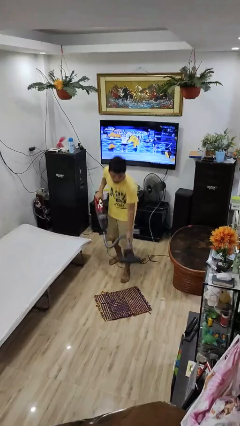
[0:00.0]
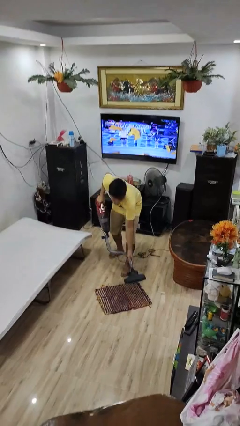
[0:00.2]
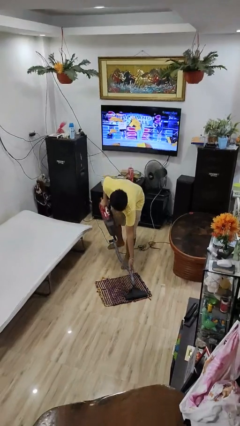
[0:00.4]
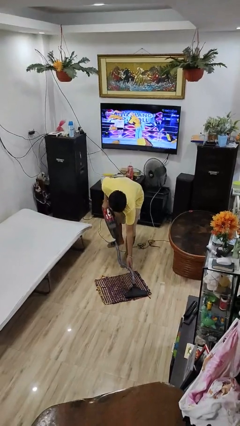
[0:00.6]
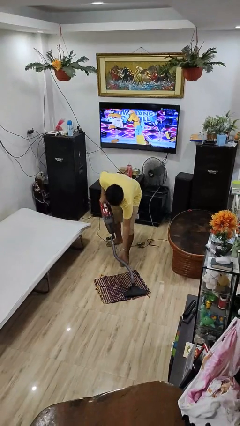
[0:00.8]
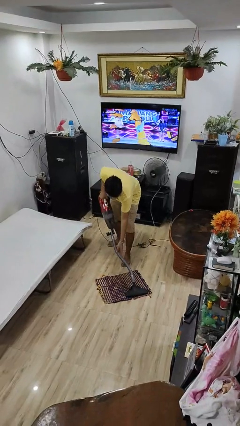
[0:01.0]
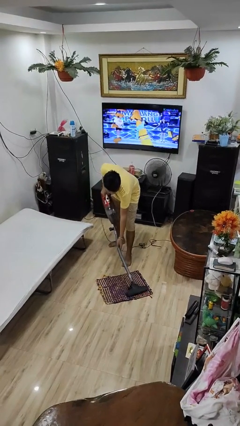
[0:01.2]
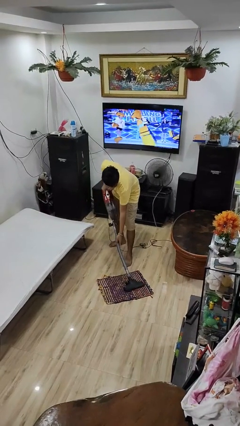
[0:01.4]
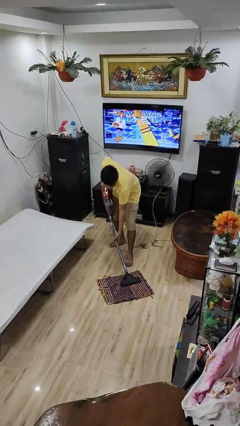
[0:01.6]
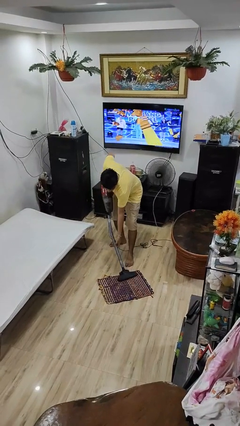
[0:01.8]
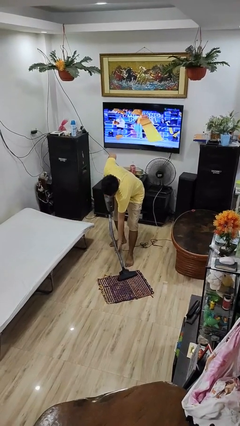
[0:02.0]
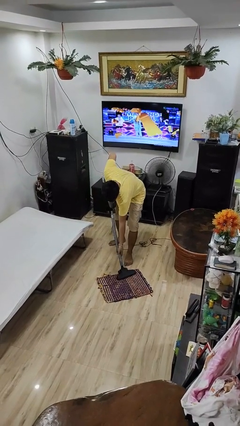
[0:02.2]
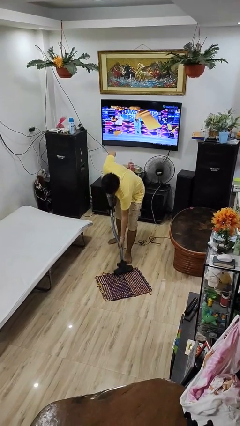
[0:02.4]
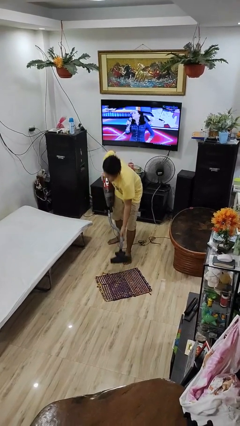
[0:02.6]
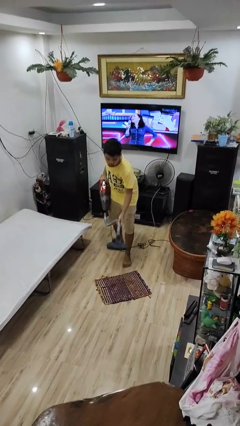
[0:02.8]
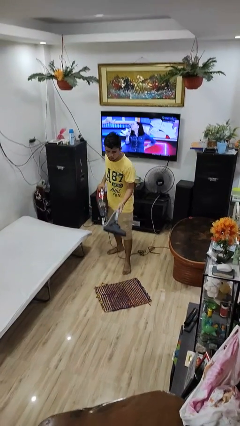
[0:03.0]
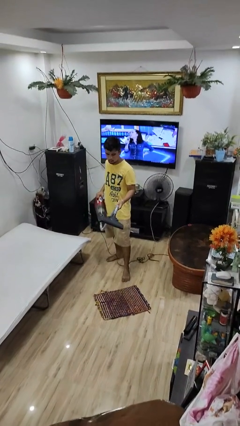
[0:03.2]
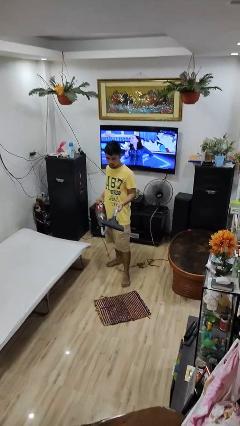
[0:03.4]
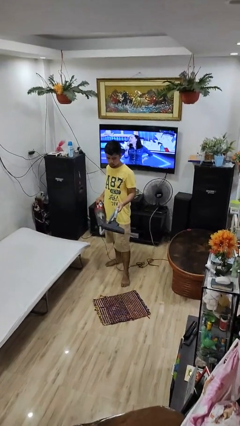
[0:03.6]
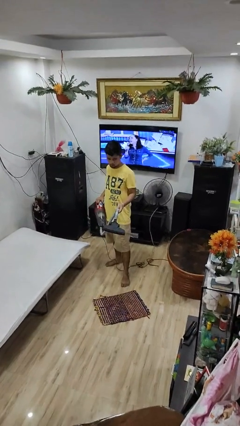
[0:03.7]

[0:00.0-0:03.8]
person vacuums carpet

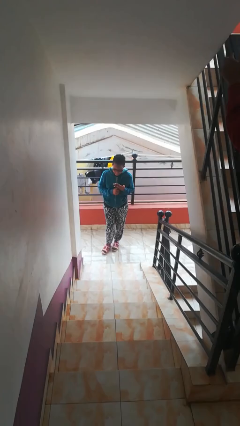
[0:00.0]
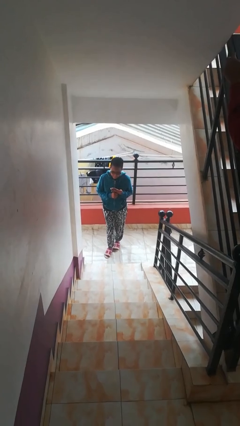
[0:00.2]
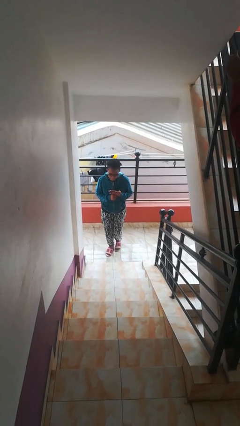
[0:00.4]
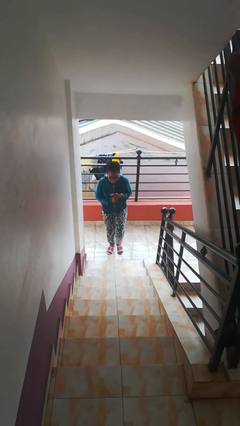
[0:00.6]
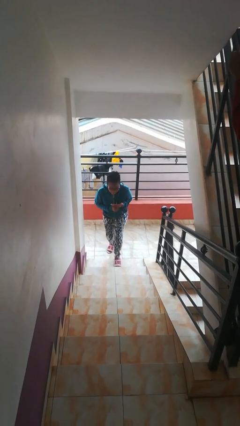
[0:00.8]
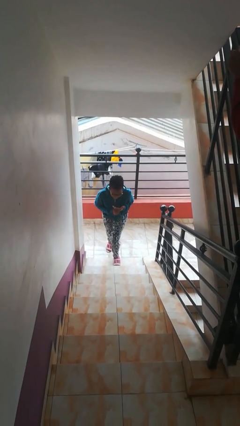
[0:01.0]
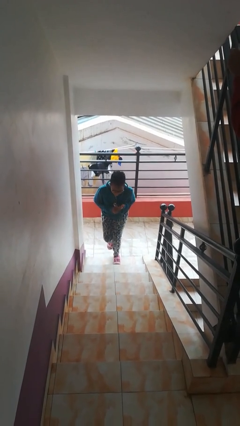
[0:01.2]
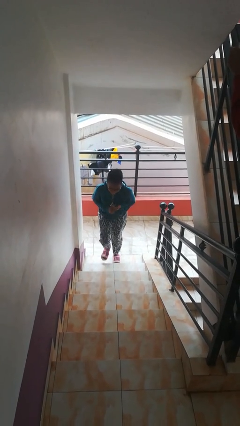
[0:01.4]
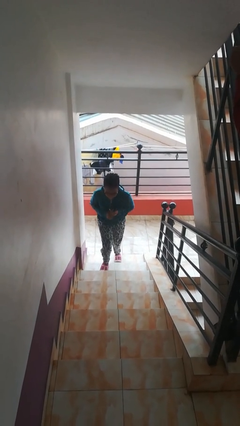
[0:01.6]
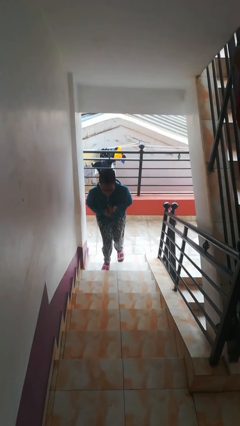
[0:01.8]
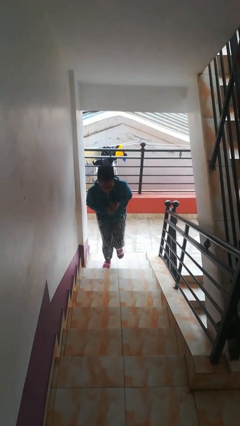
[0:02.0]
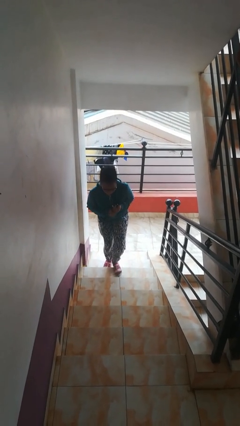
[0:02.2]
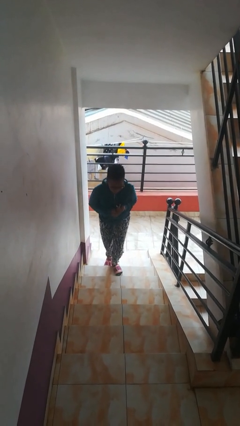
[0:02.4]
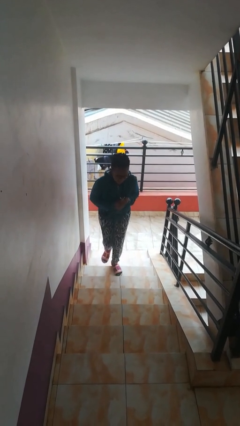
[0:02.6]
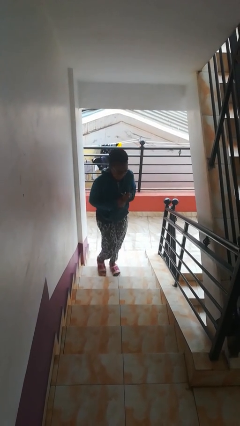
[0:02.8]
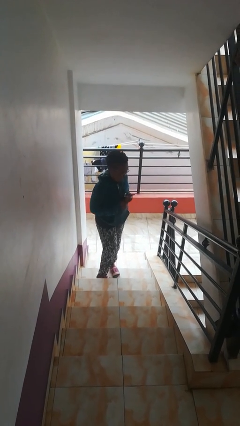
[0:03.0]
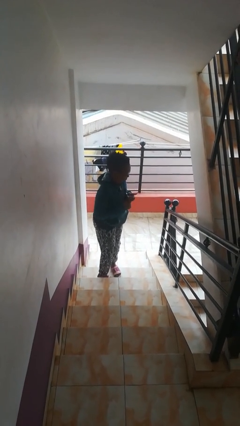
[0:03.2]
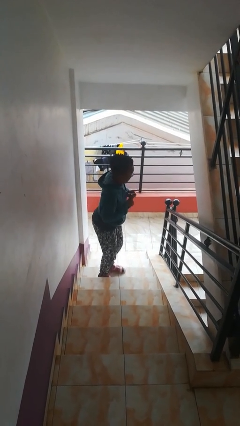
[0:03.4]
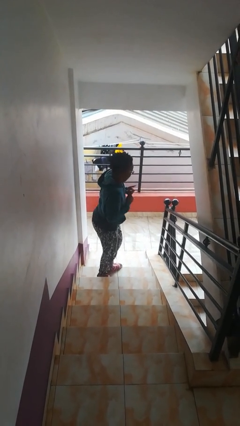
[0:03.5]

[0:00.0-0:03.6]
person climbs up stairs

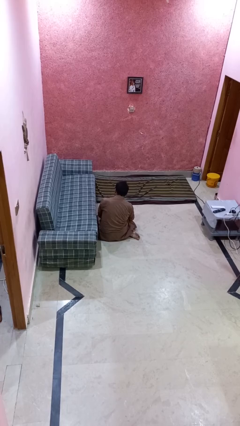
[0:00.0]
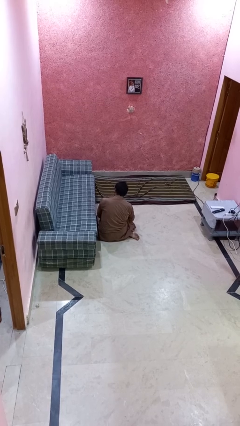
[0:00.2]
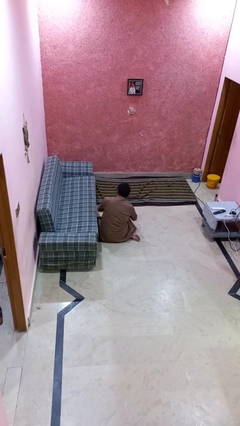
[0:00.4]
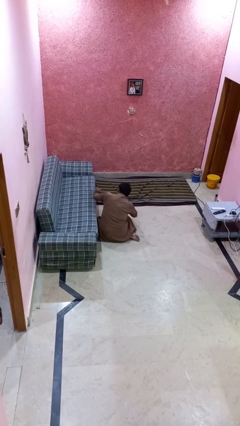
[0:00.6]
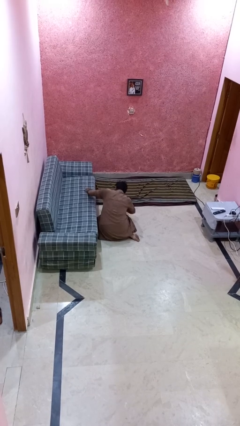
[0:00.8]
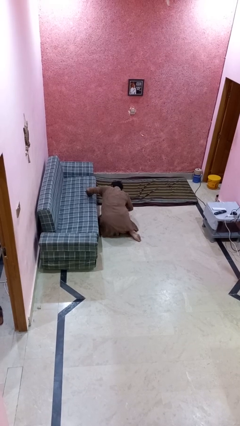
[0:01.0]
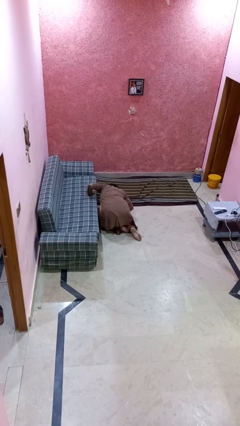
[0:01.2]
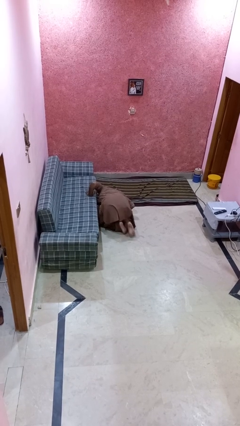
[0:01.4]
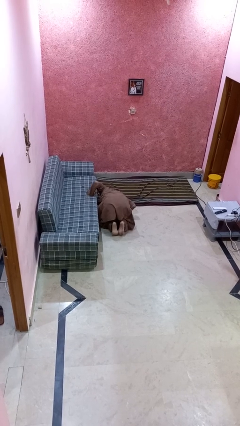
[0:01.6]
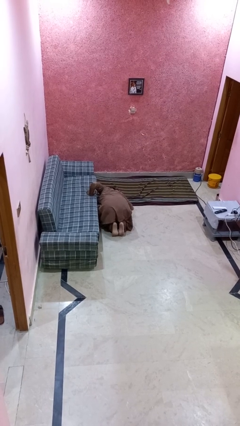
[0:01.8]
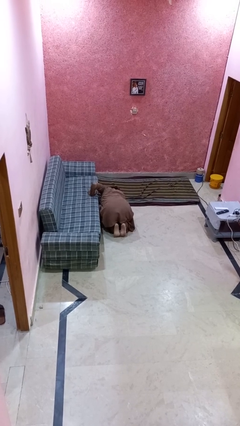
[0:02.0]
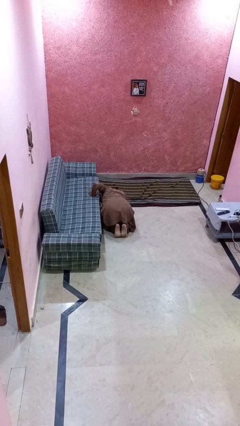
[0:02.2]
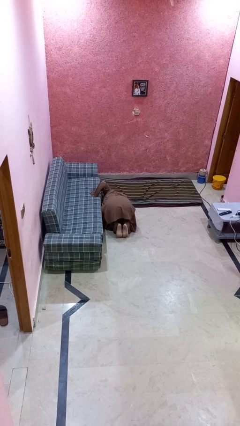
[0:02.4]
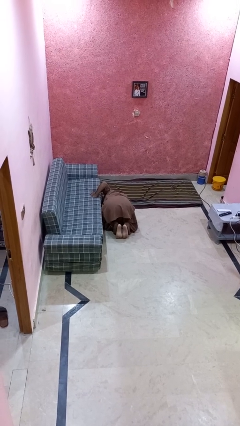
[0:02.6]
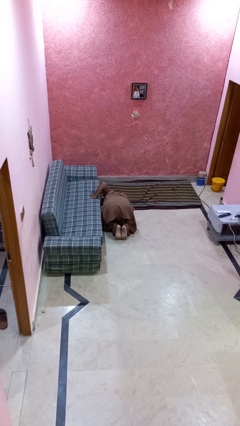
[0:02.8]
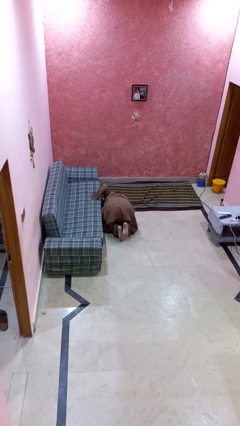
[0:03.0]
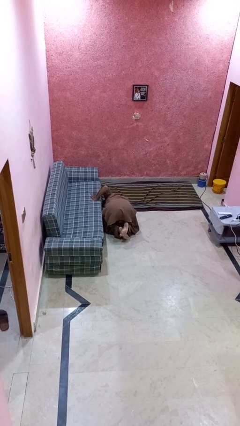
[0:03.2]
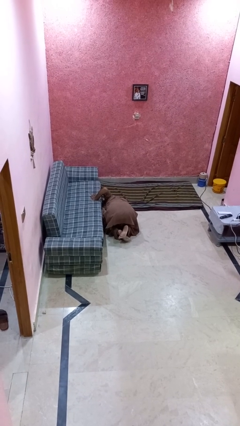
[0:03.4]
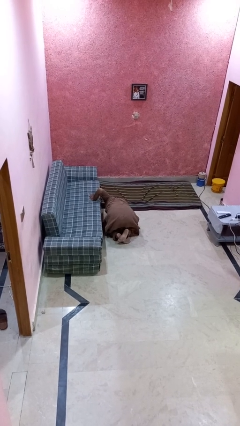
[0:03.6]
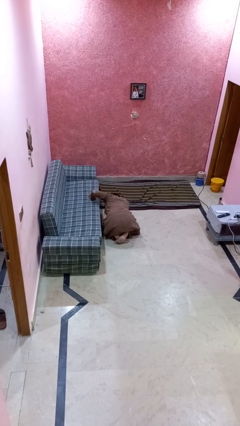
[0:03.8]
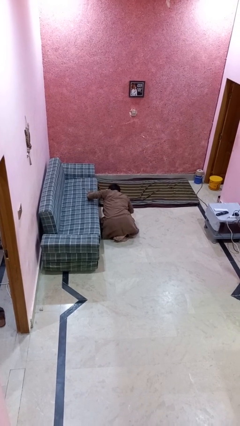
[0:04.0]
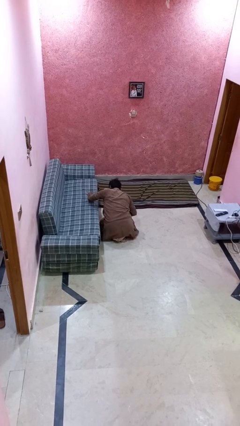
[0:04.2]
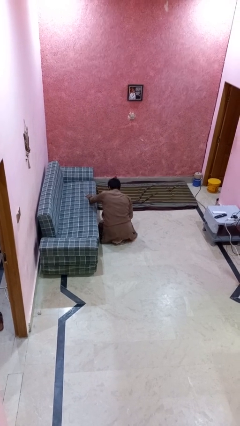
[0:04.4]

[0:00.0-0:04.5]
person searches under couch

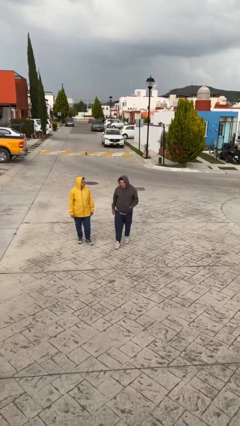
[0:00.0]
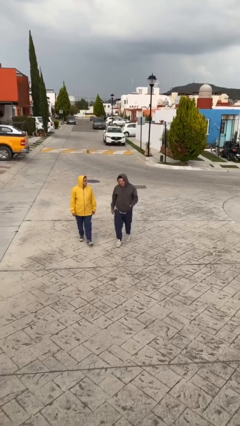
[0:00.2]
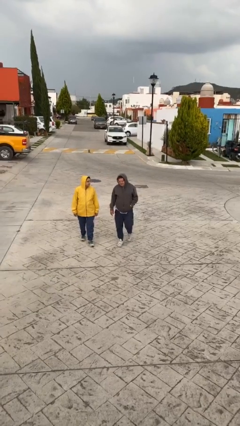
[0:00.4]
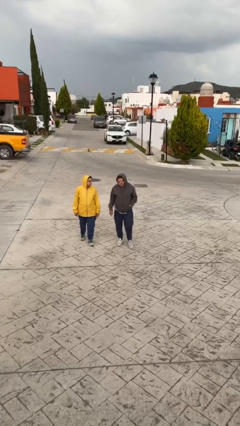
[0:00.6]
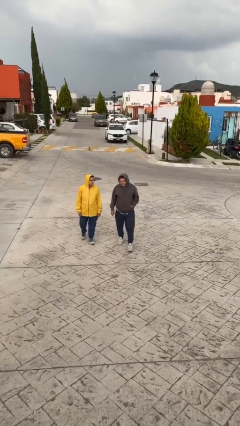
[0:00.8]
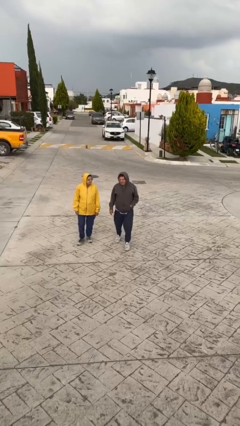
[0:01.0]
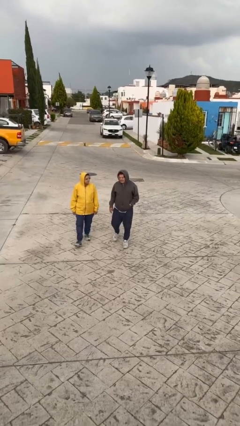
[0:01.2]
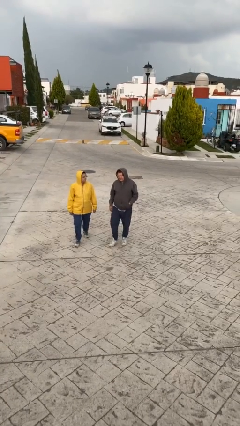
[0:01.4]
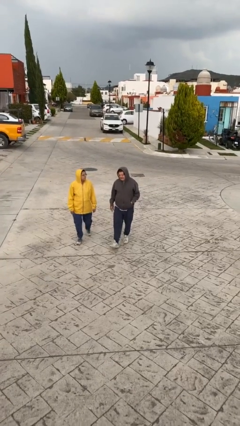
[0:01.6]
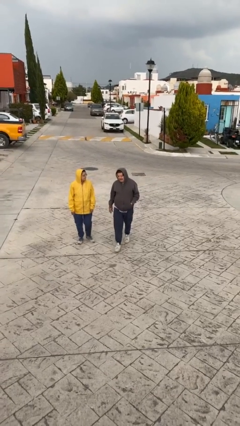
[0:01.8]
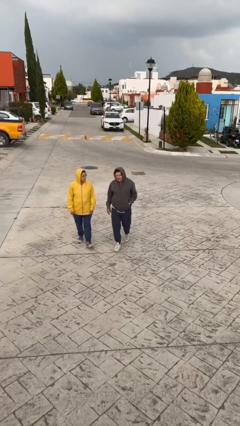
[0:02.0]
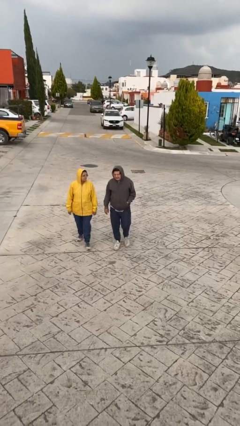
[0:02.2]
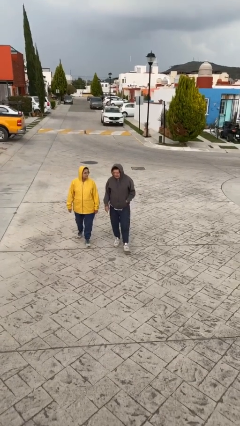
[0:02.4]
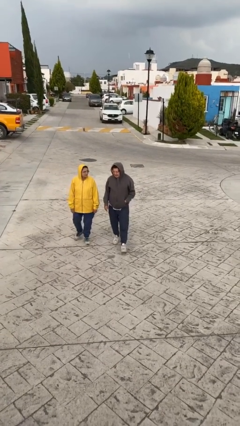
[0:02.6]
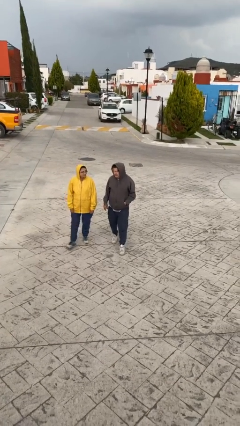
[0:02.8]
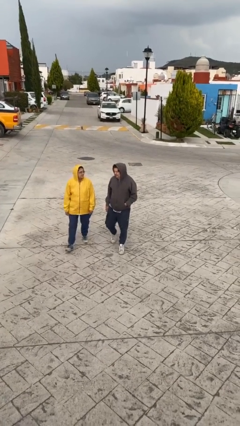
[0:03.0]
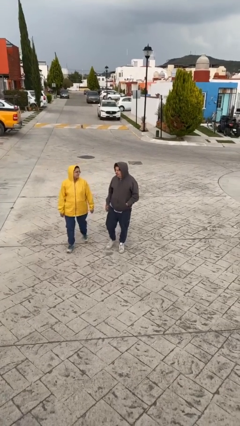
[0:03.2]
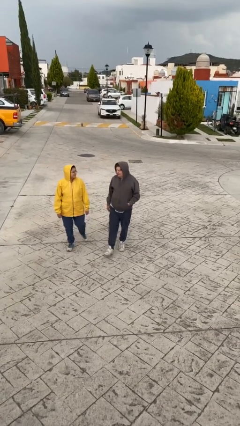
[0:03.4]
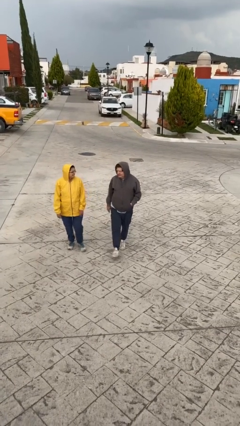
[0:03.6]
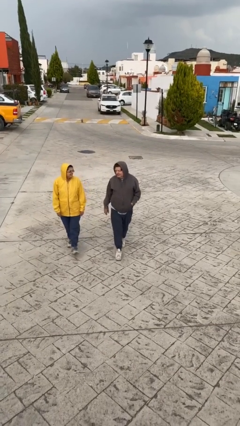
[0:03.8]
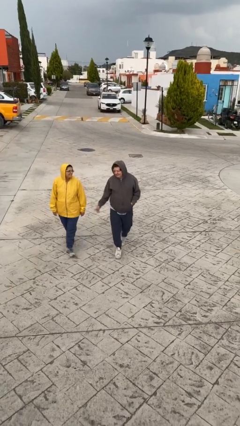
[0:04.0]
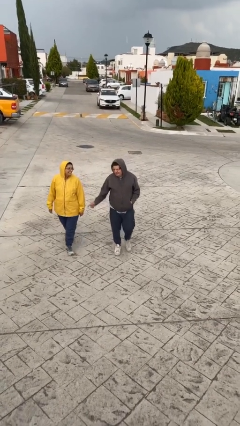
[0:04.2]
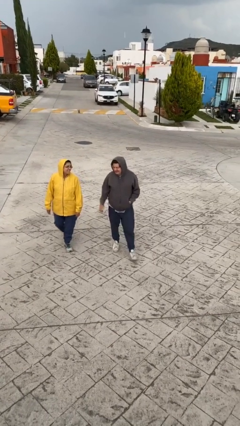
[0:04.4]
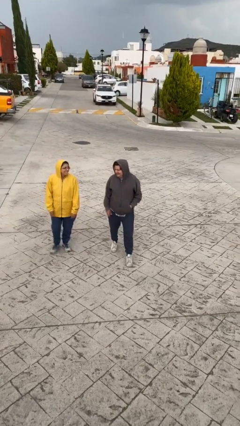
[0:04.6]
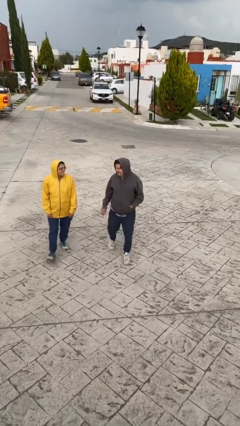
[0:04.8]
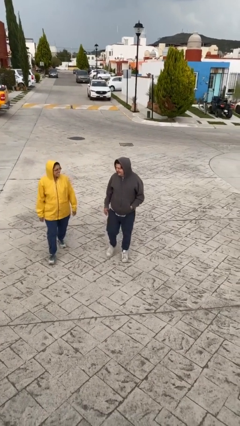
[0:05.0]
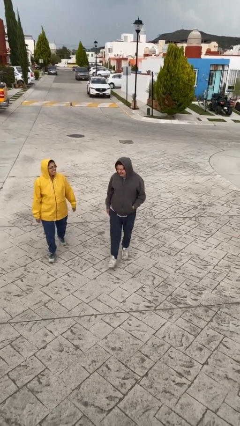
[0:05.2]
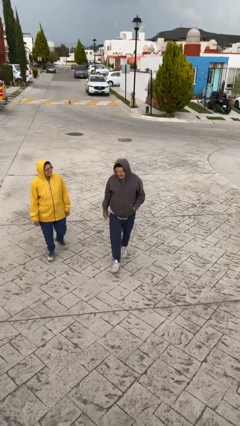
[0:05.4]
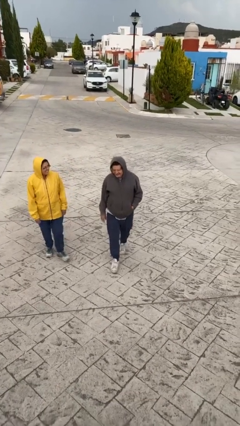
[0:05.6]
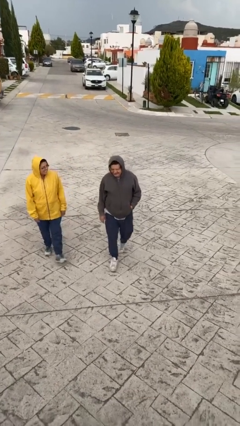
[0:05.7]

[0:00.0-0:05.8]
person talks to person

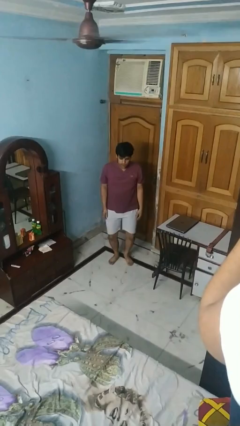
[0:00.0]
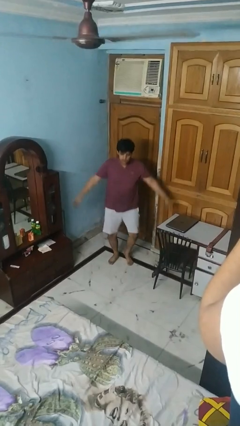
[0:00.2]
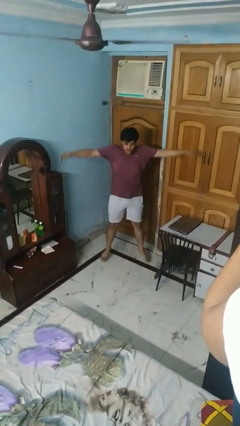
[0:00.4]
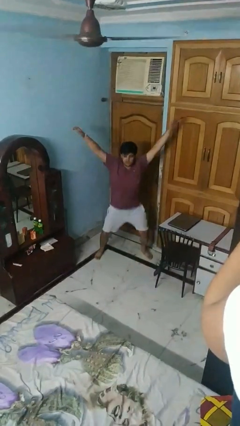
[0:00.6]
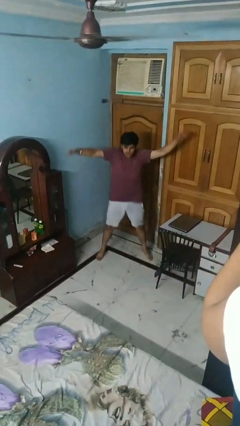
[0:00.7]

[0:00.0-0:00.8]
person exercises with jumping jacks
